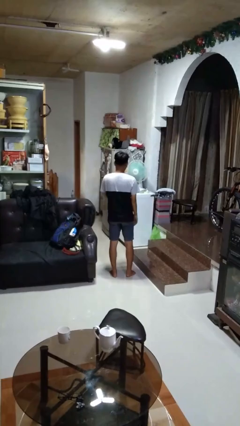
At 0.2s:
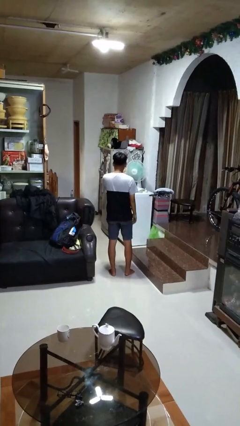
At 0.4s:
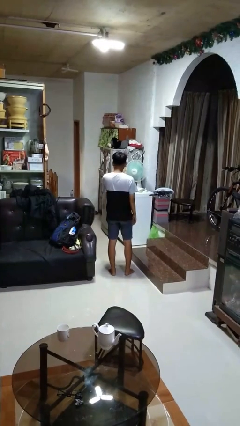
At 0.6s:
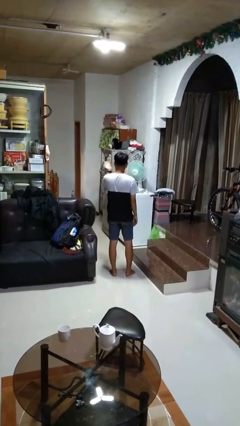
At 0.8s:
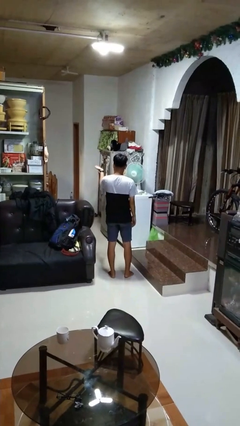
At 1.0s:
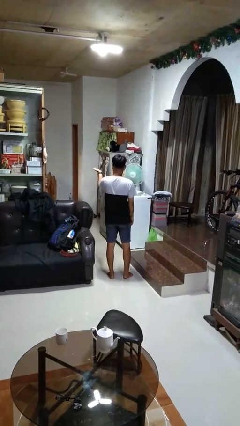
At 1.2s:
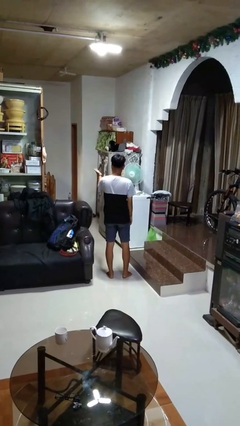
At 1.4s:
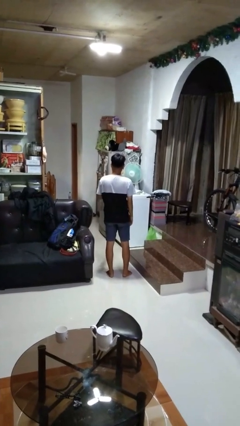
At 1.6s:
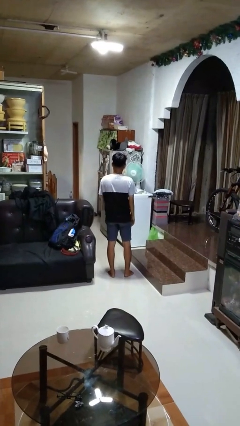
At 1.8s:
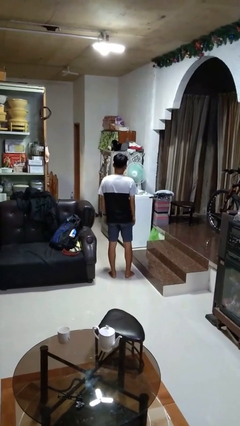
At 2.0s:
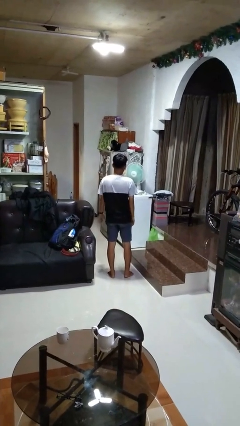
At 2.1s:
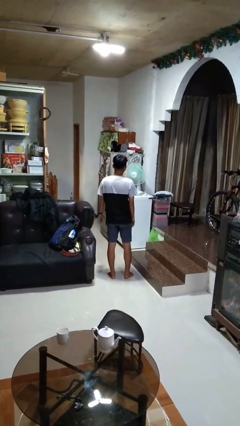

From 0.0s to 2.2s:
person gestures blow kiss

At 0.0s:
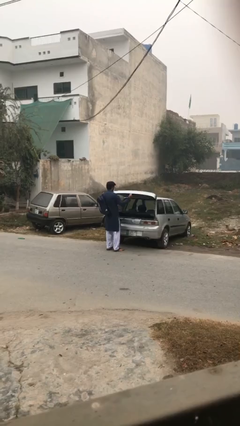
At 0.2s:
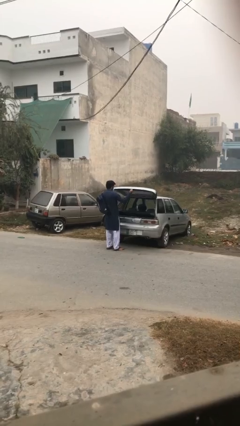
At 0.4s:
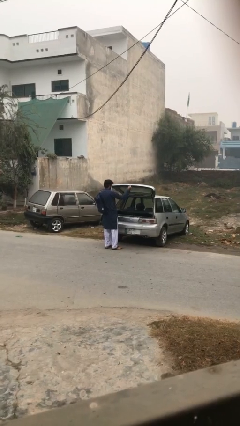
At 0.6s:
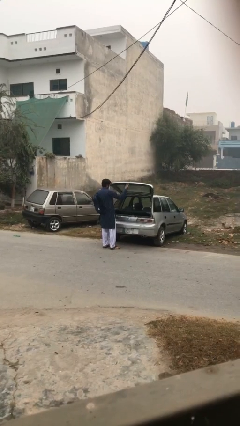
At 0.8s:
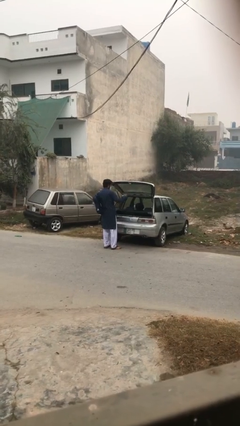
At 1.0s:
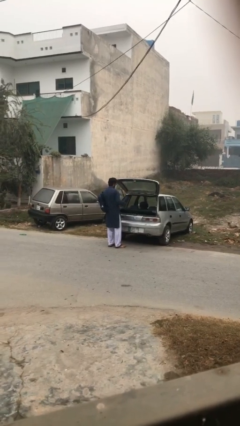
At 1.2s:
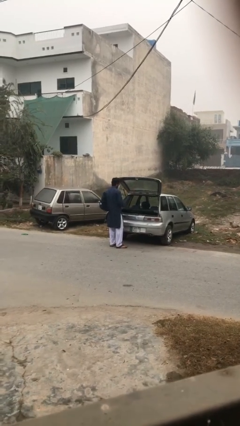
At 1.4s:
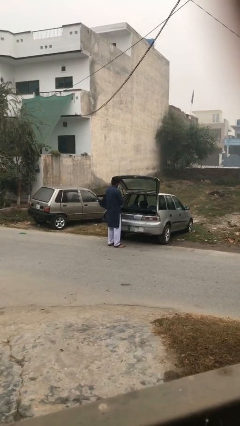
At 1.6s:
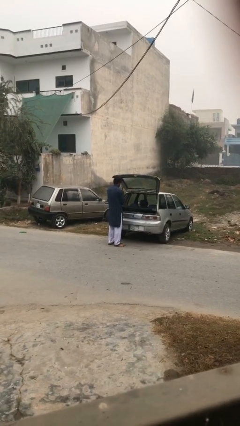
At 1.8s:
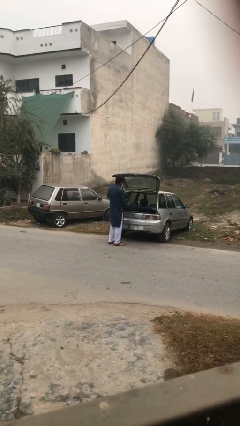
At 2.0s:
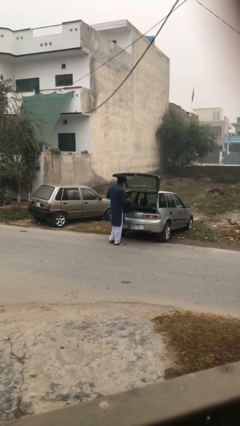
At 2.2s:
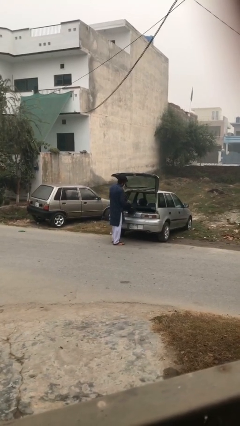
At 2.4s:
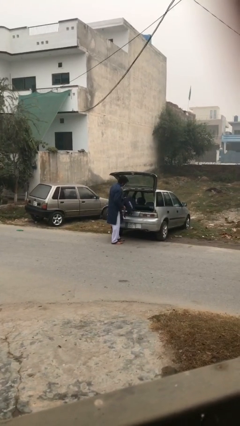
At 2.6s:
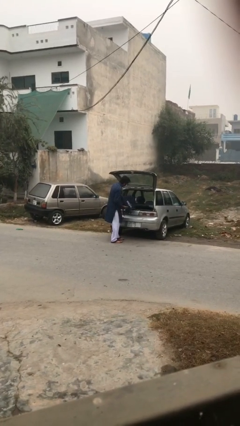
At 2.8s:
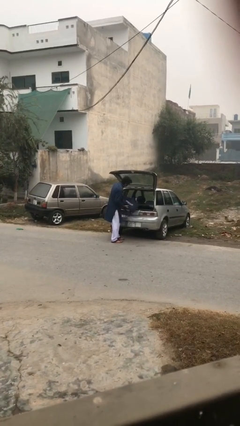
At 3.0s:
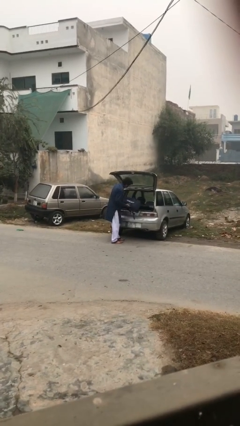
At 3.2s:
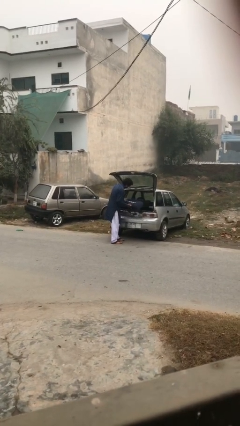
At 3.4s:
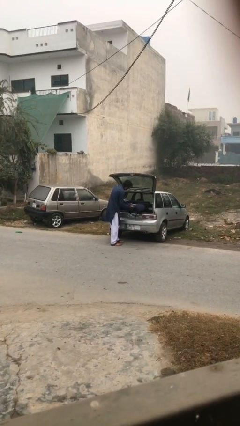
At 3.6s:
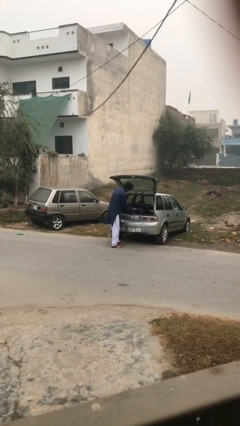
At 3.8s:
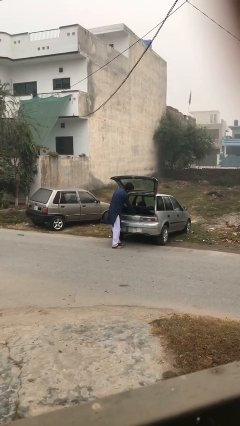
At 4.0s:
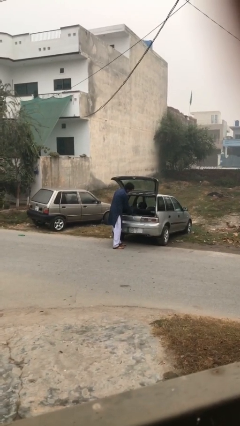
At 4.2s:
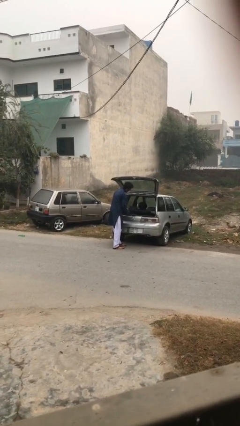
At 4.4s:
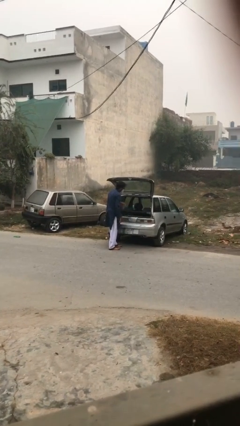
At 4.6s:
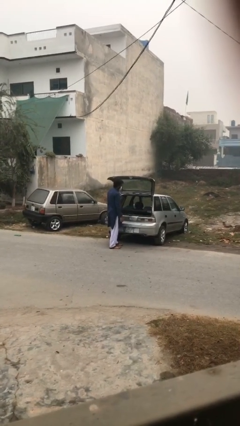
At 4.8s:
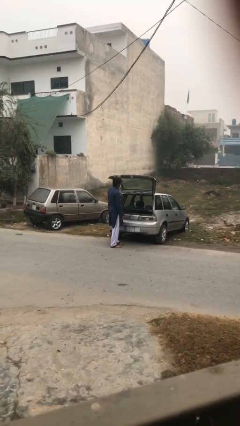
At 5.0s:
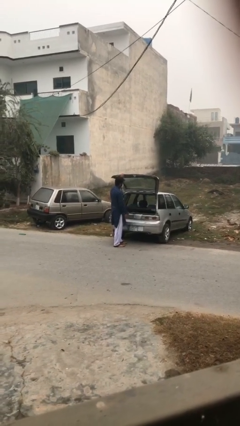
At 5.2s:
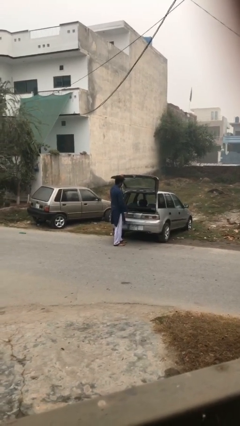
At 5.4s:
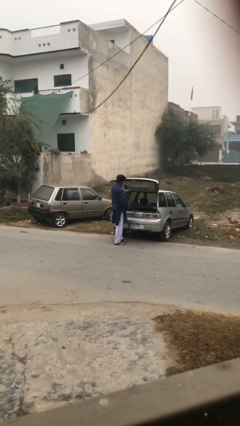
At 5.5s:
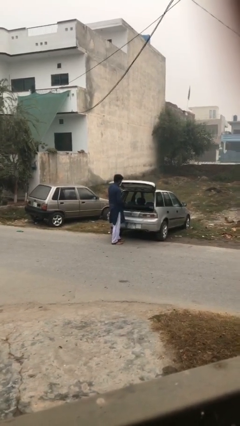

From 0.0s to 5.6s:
person loads car

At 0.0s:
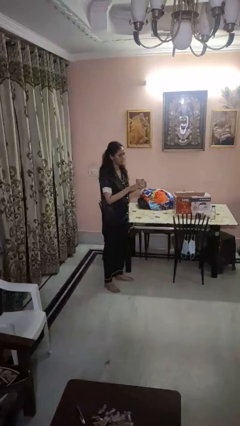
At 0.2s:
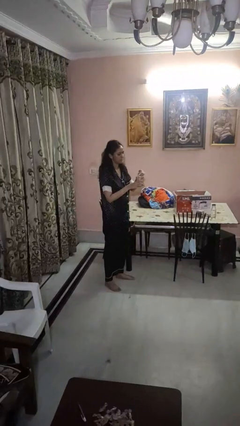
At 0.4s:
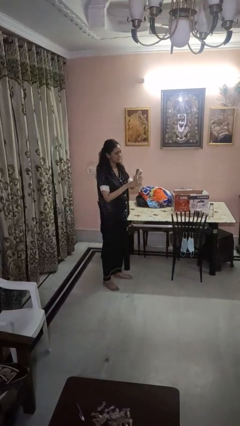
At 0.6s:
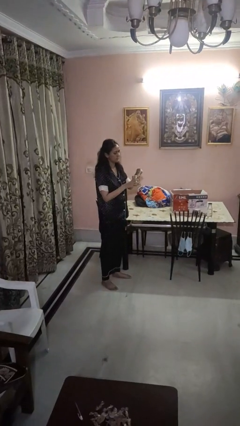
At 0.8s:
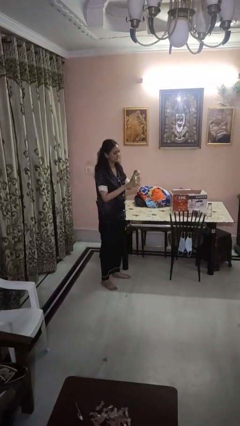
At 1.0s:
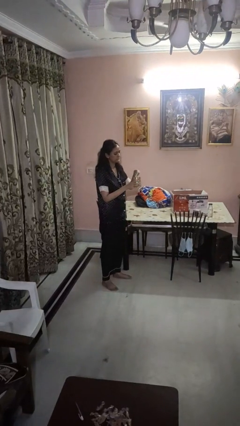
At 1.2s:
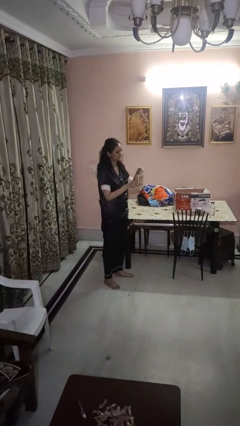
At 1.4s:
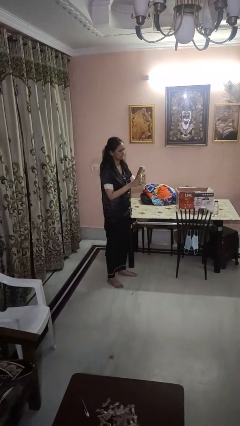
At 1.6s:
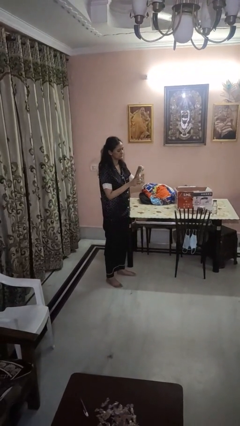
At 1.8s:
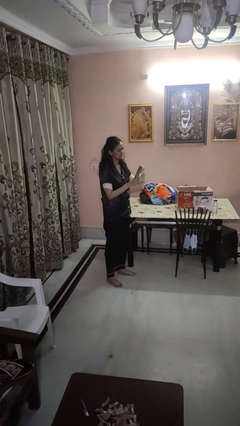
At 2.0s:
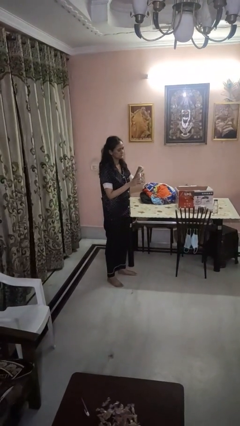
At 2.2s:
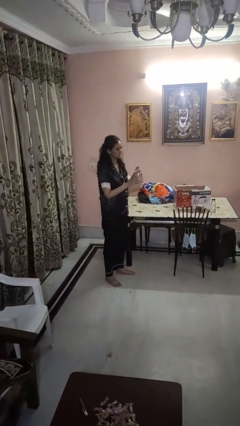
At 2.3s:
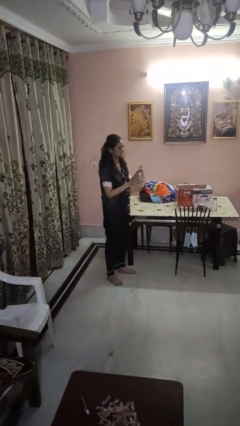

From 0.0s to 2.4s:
person opens can with can opener

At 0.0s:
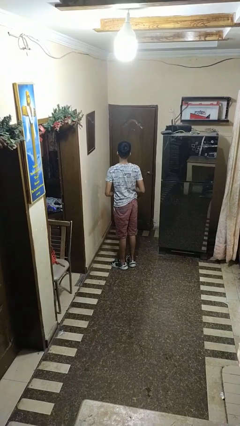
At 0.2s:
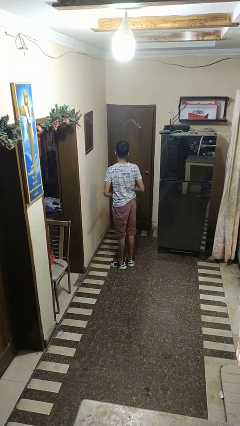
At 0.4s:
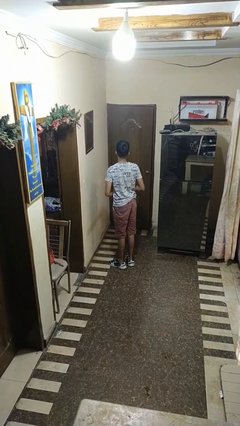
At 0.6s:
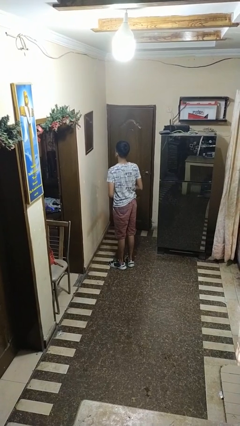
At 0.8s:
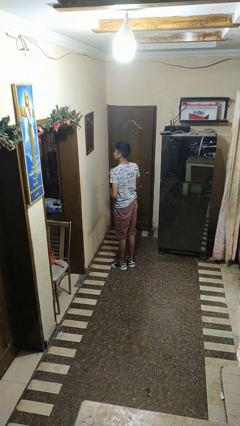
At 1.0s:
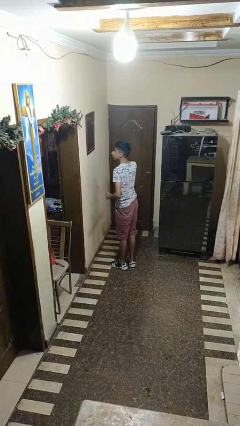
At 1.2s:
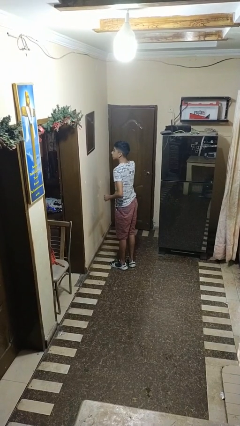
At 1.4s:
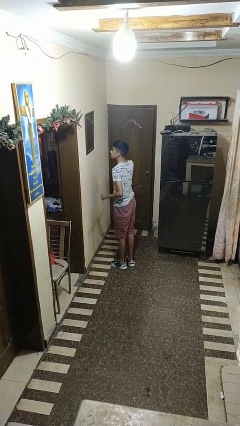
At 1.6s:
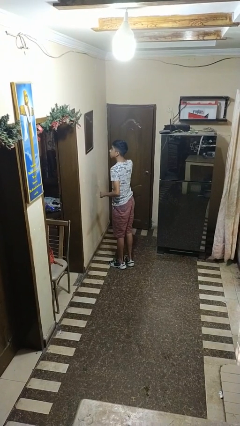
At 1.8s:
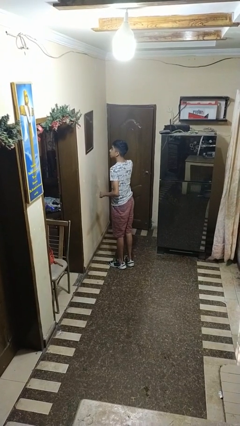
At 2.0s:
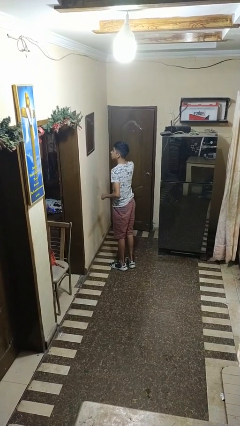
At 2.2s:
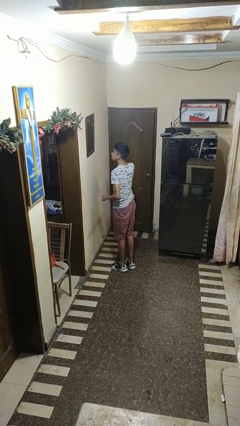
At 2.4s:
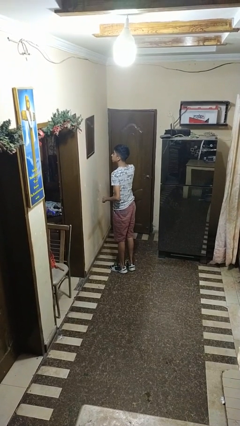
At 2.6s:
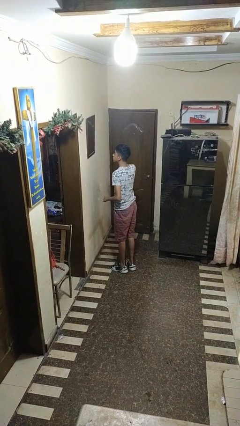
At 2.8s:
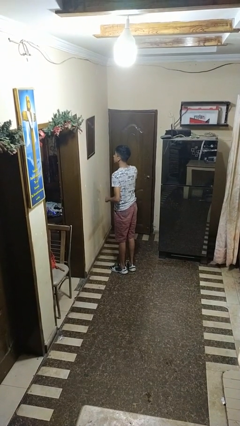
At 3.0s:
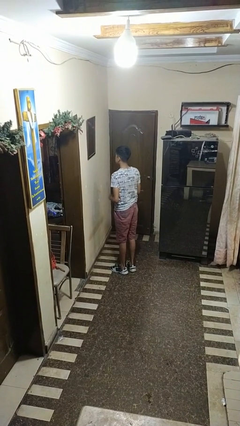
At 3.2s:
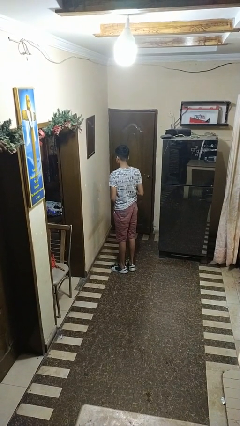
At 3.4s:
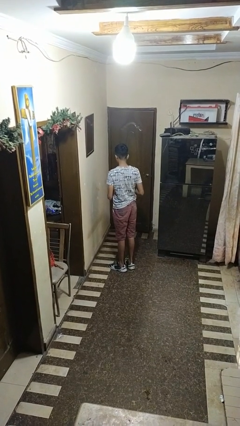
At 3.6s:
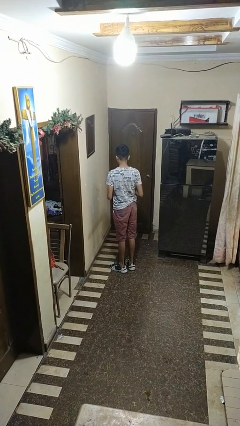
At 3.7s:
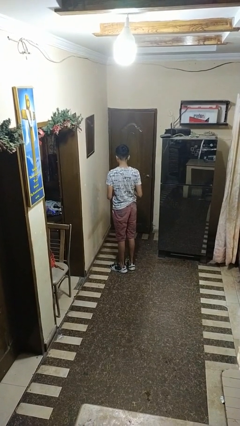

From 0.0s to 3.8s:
person applies eye makeup

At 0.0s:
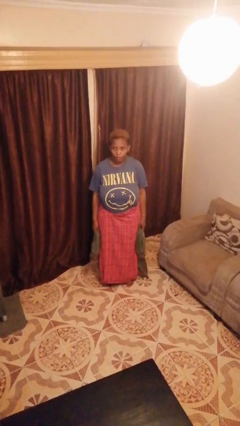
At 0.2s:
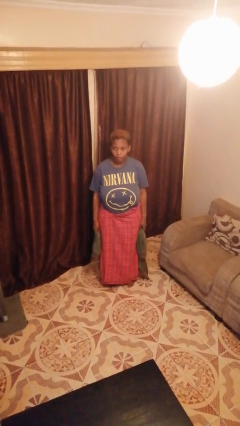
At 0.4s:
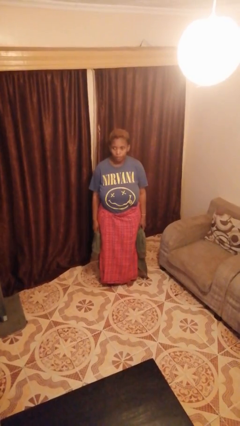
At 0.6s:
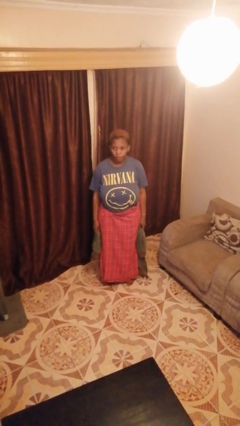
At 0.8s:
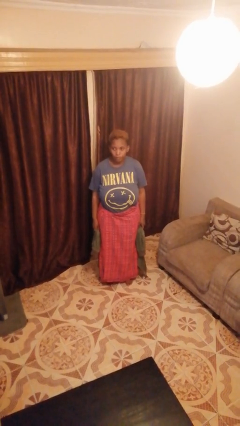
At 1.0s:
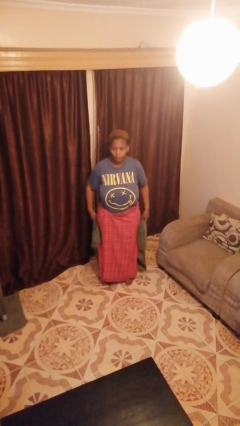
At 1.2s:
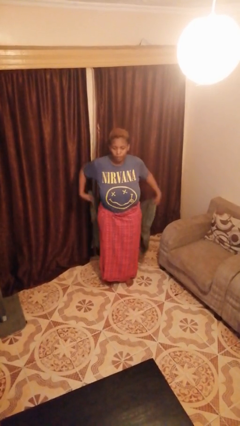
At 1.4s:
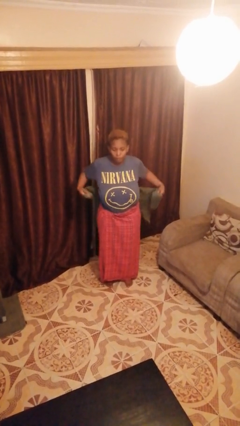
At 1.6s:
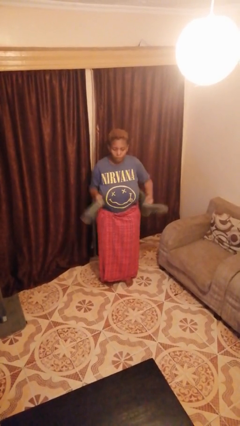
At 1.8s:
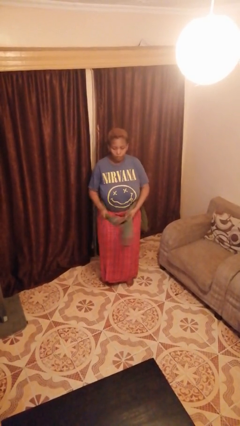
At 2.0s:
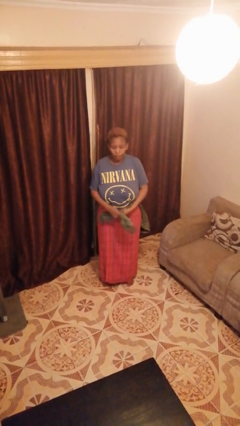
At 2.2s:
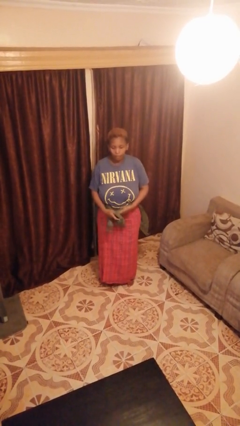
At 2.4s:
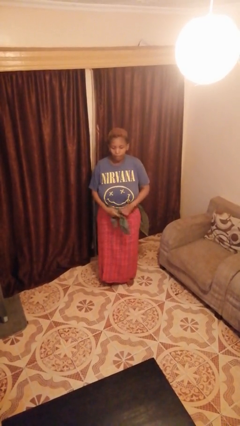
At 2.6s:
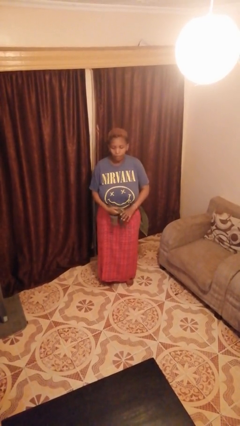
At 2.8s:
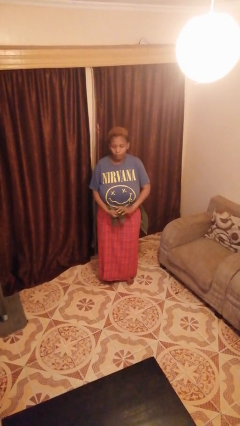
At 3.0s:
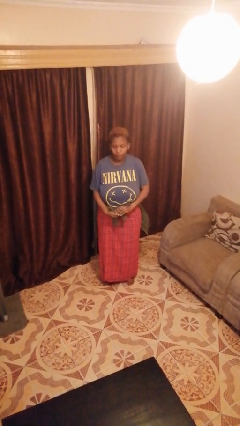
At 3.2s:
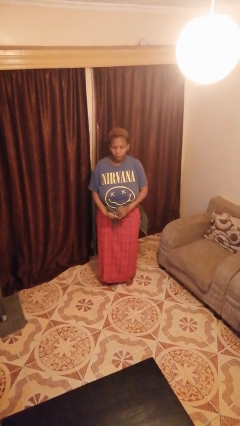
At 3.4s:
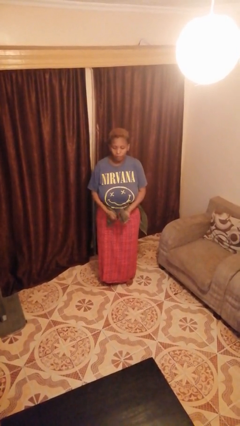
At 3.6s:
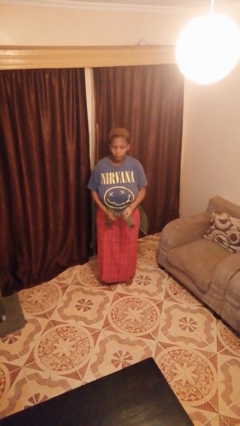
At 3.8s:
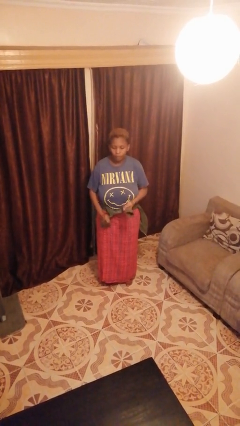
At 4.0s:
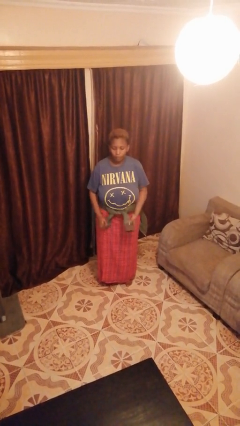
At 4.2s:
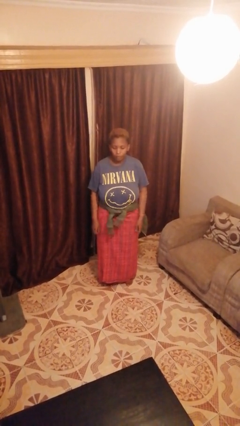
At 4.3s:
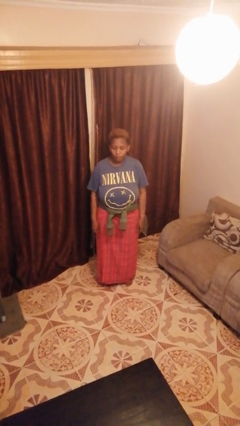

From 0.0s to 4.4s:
person ties jacket around waist
